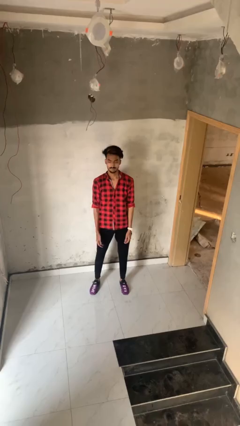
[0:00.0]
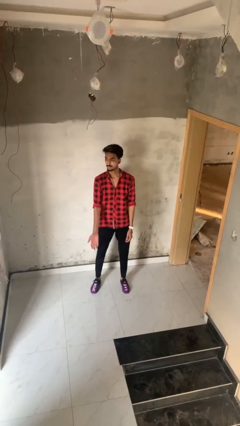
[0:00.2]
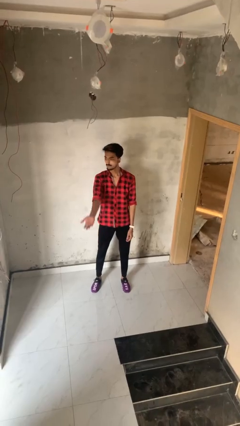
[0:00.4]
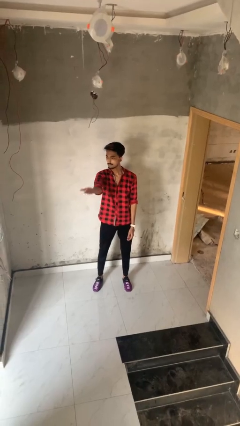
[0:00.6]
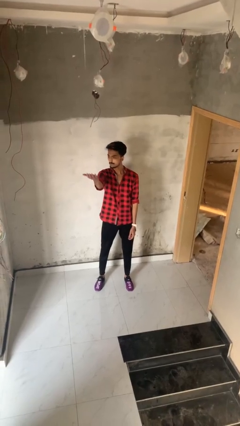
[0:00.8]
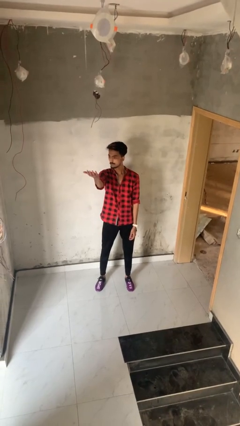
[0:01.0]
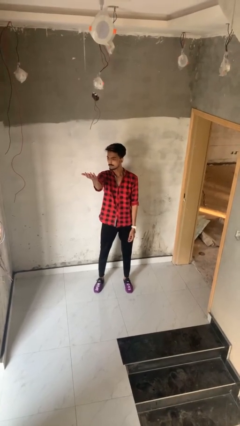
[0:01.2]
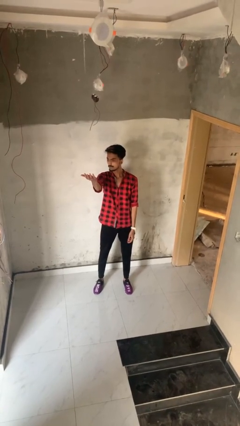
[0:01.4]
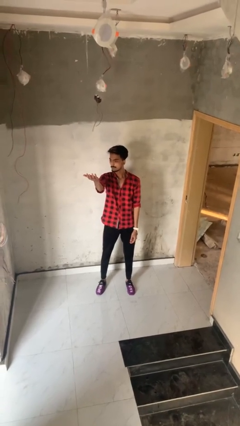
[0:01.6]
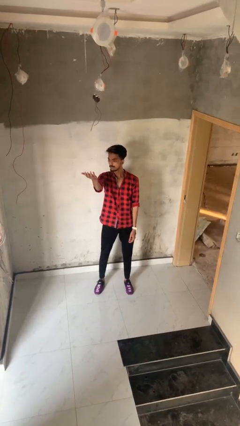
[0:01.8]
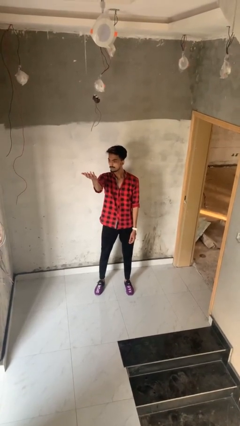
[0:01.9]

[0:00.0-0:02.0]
person gestures swipe up

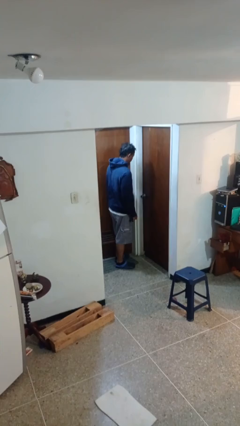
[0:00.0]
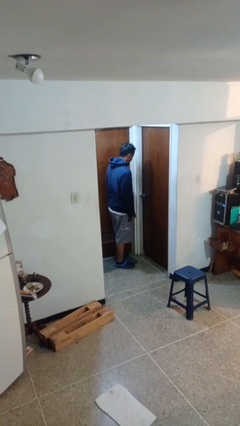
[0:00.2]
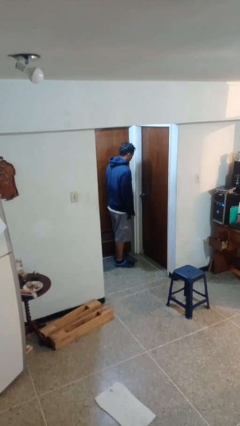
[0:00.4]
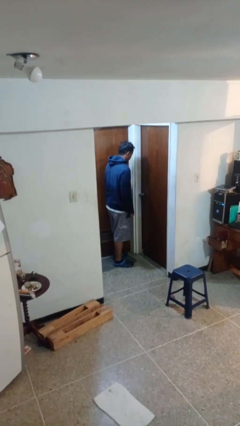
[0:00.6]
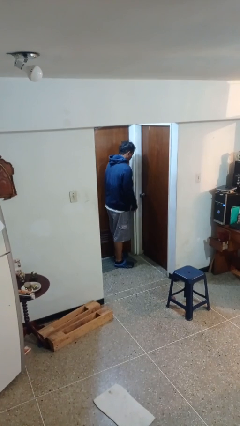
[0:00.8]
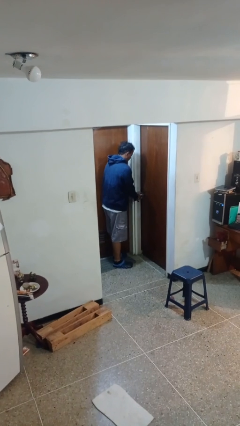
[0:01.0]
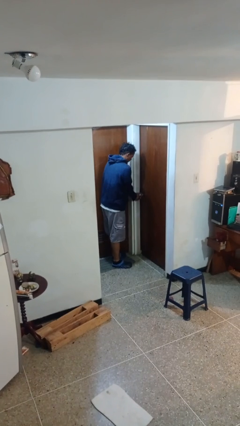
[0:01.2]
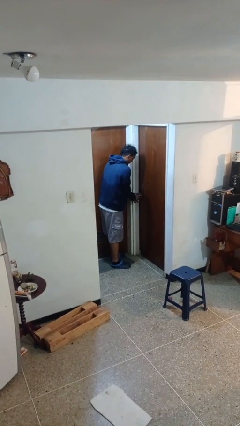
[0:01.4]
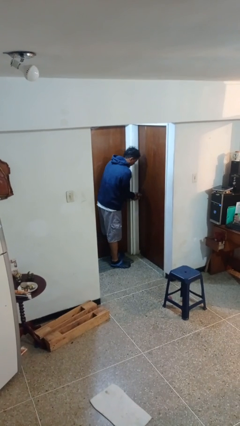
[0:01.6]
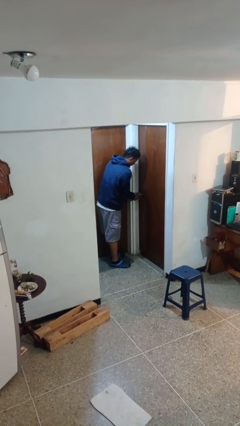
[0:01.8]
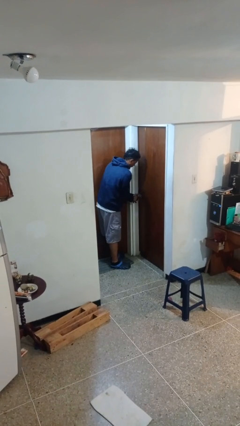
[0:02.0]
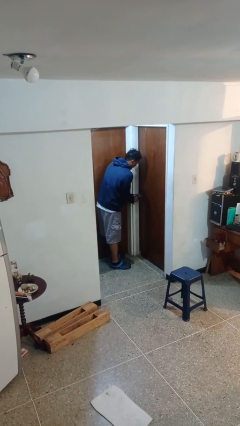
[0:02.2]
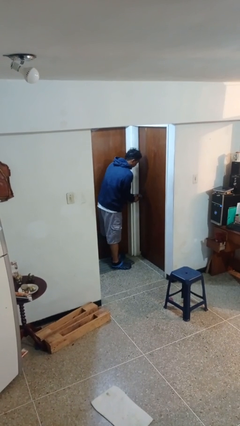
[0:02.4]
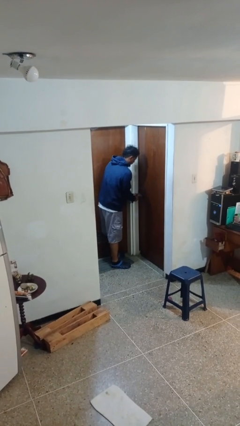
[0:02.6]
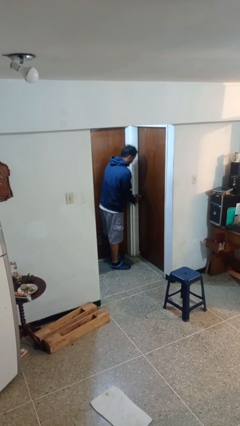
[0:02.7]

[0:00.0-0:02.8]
person unlocks door with keys

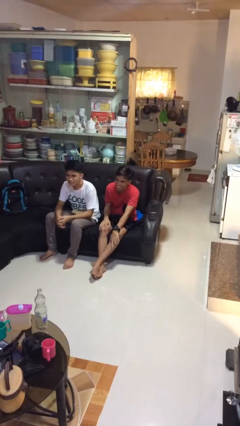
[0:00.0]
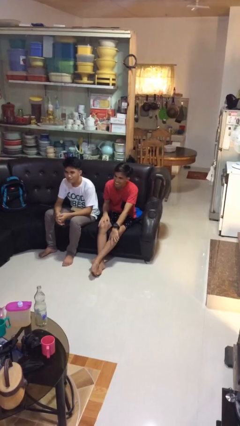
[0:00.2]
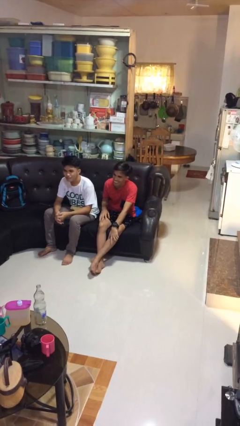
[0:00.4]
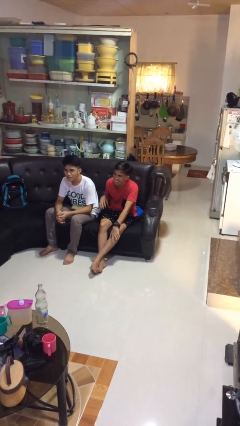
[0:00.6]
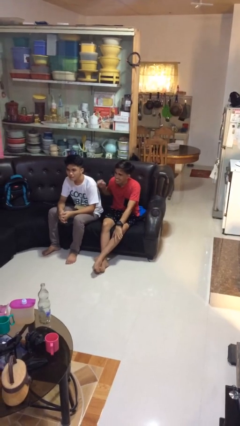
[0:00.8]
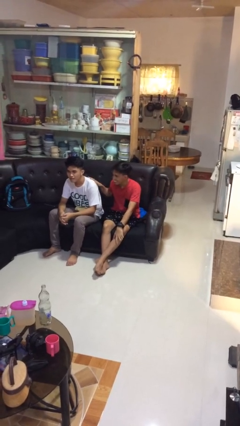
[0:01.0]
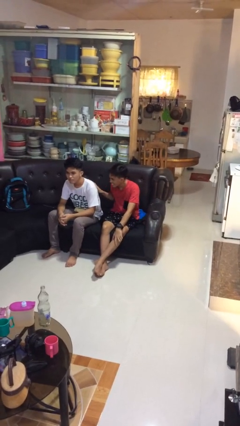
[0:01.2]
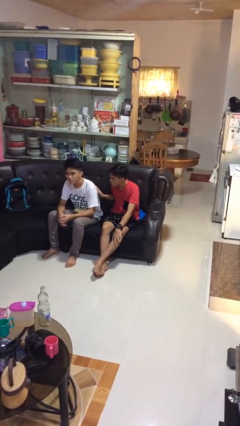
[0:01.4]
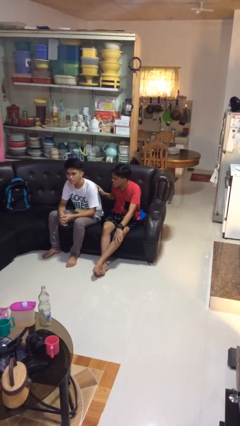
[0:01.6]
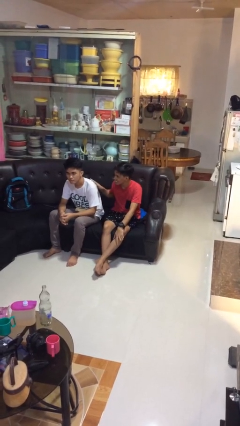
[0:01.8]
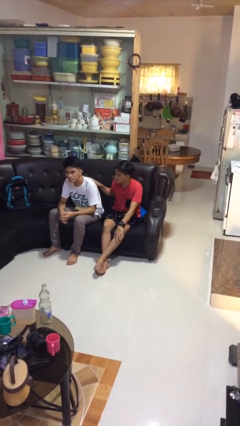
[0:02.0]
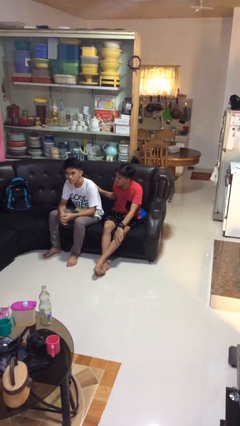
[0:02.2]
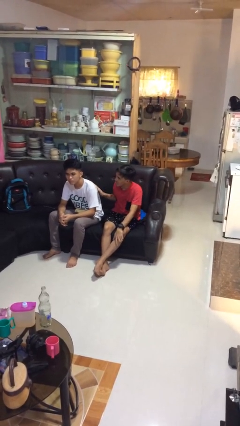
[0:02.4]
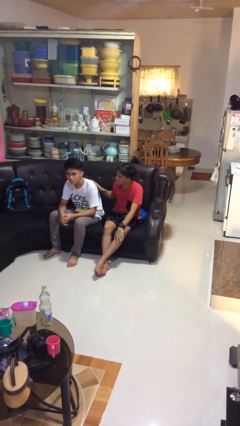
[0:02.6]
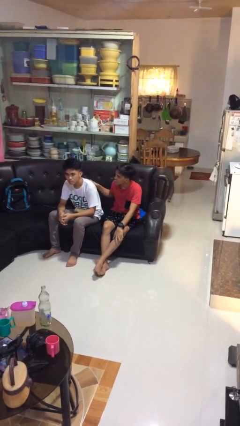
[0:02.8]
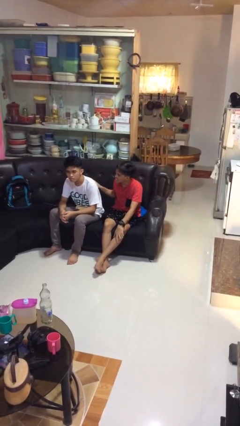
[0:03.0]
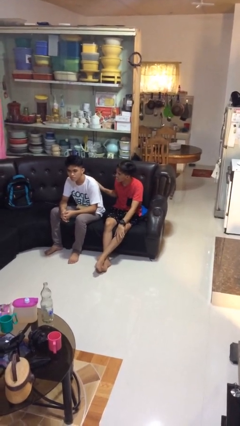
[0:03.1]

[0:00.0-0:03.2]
person touches back of person

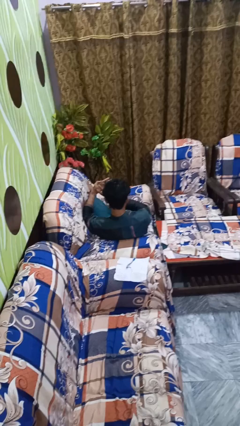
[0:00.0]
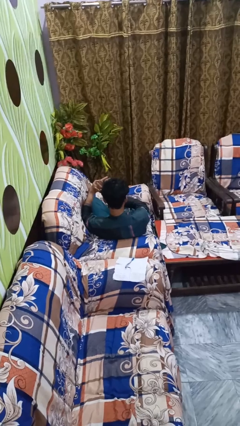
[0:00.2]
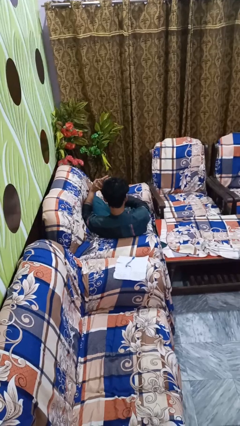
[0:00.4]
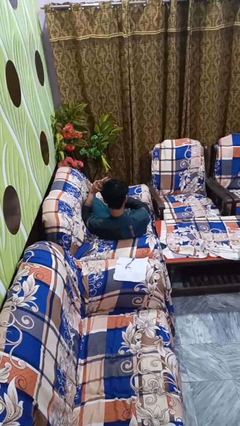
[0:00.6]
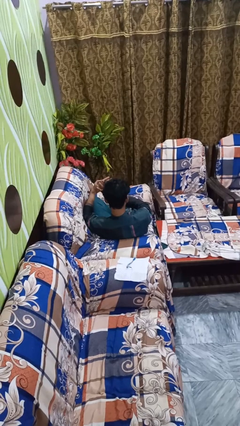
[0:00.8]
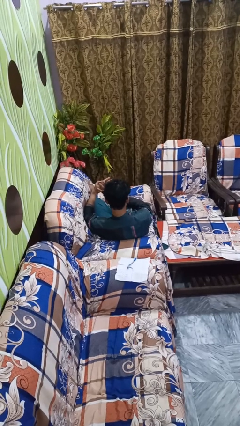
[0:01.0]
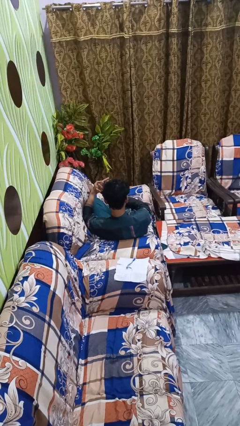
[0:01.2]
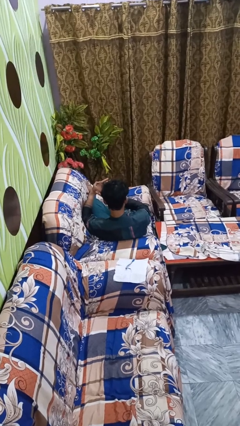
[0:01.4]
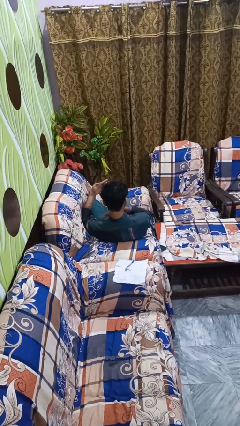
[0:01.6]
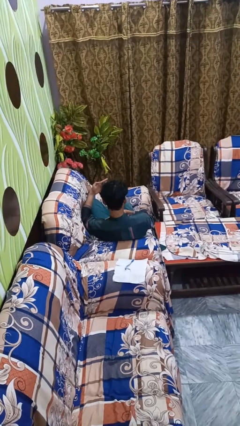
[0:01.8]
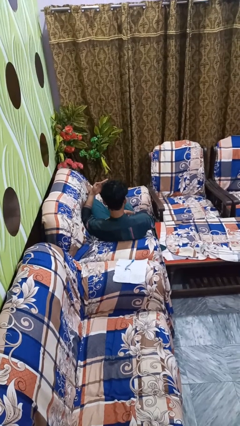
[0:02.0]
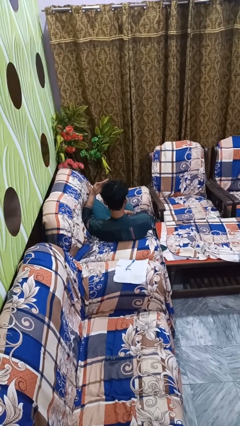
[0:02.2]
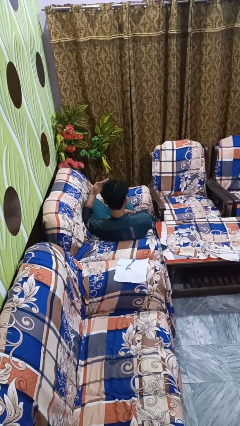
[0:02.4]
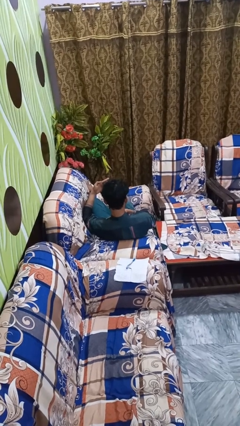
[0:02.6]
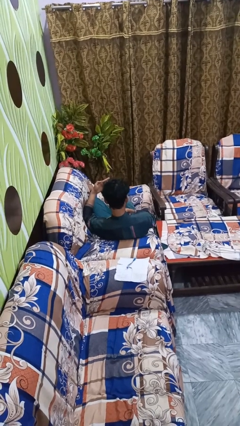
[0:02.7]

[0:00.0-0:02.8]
person gestures number four

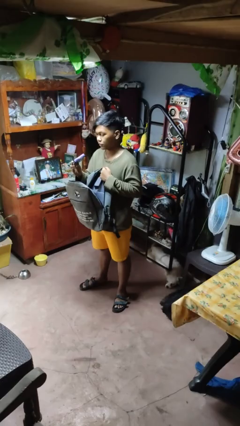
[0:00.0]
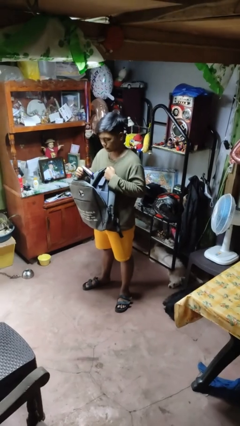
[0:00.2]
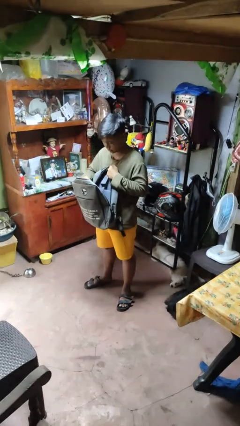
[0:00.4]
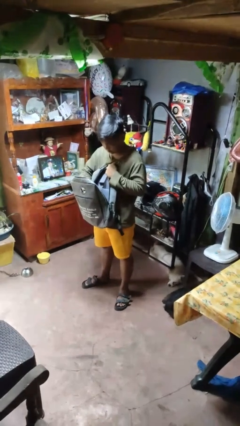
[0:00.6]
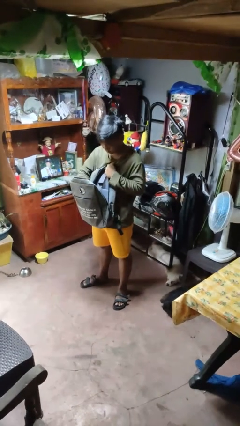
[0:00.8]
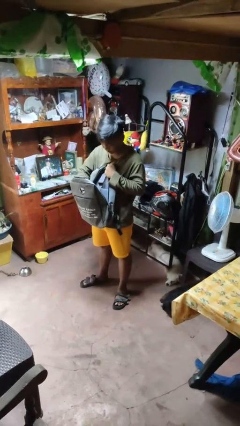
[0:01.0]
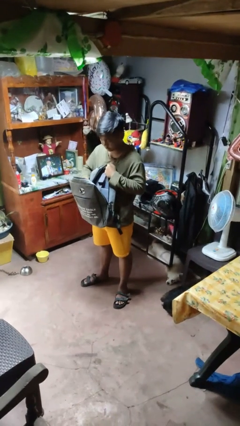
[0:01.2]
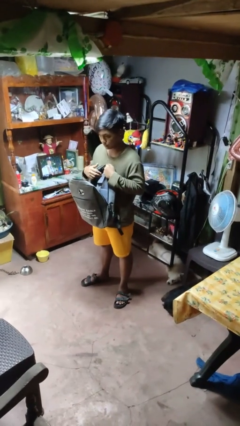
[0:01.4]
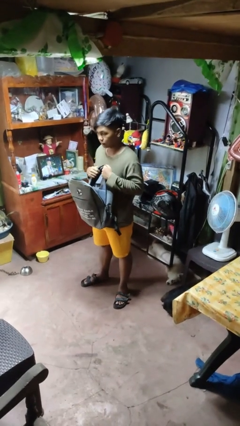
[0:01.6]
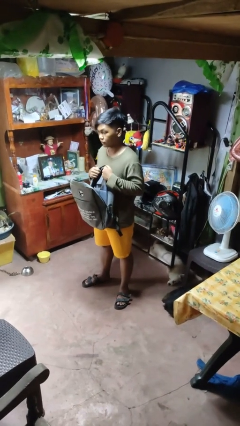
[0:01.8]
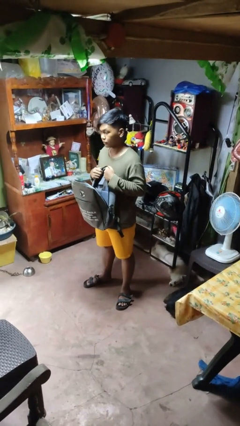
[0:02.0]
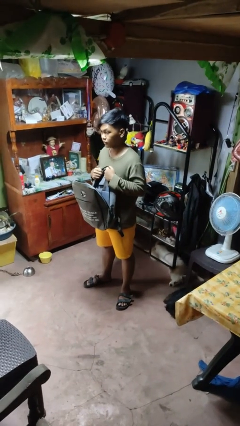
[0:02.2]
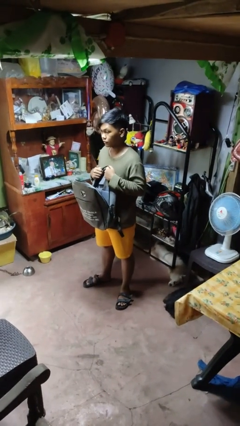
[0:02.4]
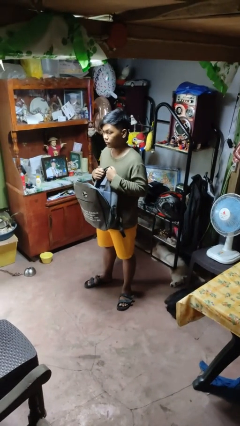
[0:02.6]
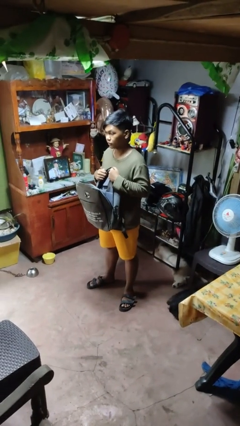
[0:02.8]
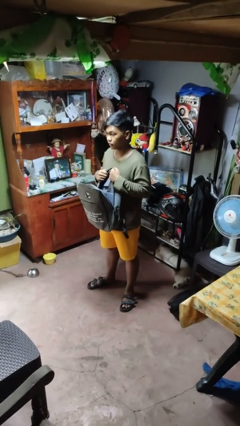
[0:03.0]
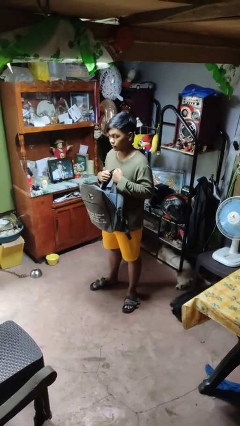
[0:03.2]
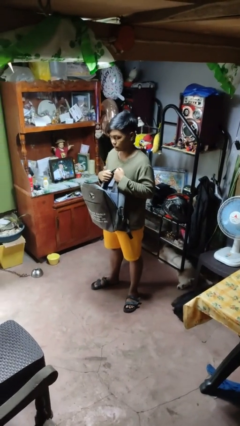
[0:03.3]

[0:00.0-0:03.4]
person puts object into backpack

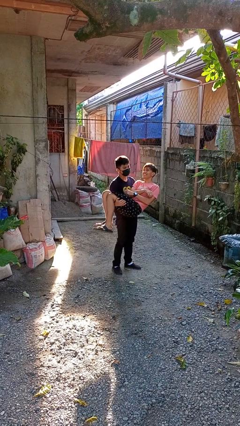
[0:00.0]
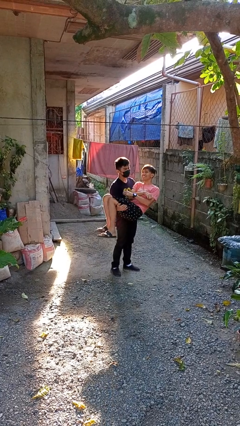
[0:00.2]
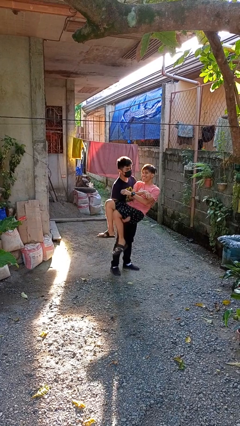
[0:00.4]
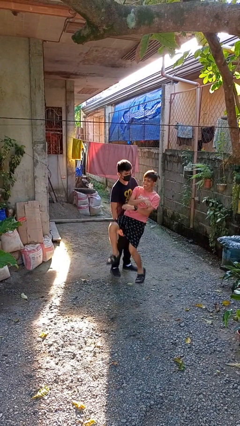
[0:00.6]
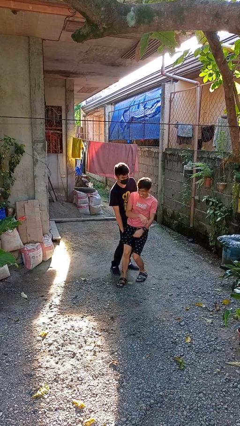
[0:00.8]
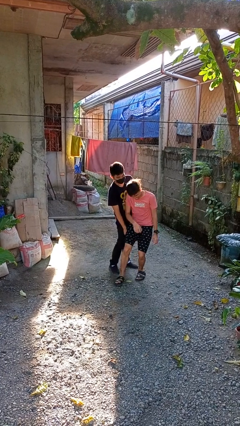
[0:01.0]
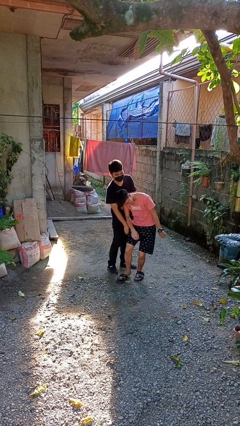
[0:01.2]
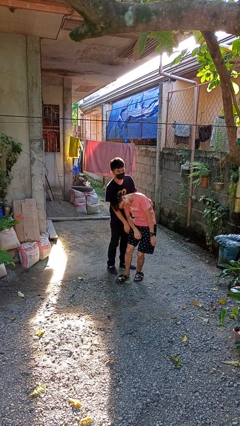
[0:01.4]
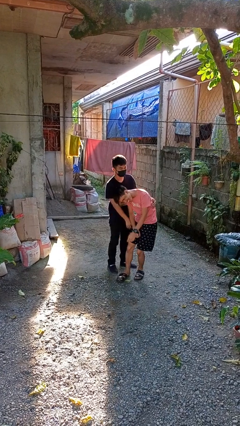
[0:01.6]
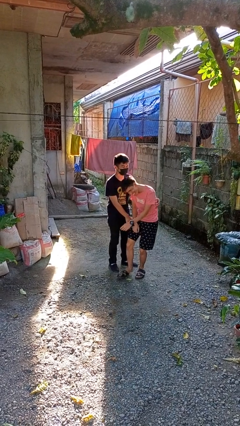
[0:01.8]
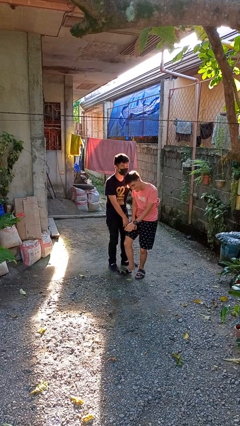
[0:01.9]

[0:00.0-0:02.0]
person puts down person

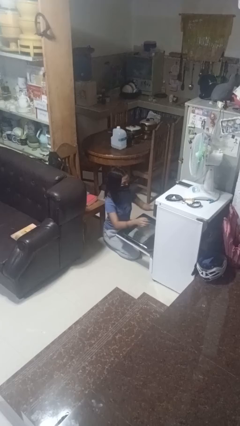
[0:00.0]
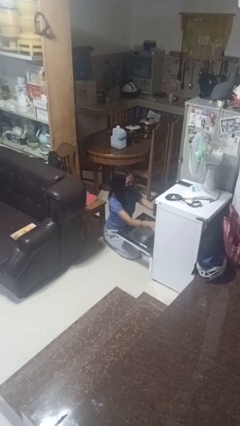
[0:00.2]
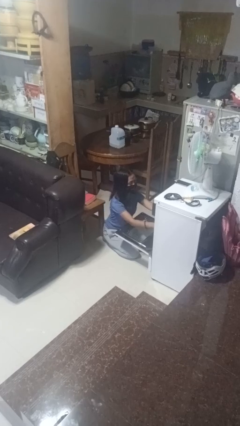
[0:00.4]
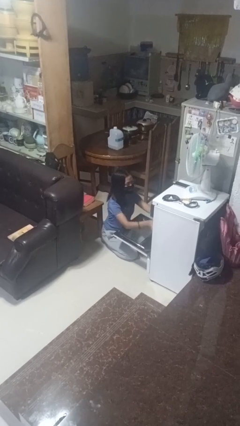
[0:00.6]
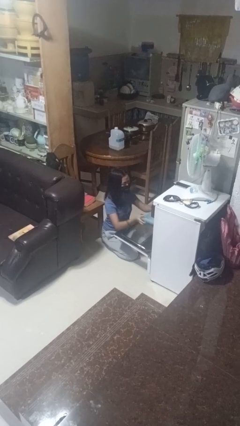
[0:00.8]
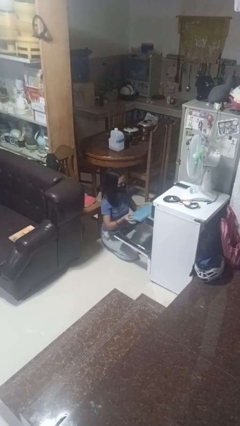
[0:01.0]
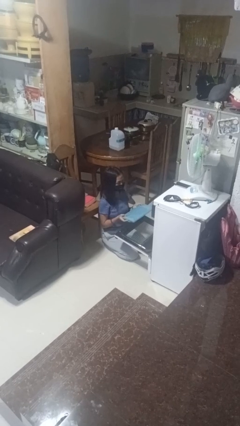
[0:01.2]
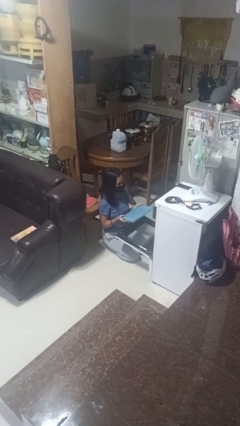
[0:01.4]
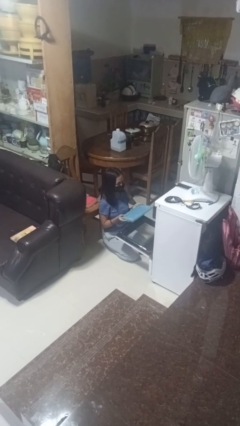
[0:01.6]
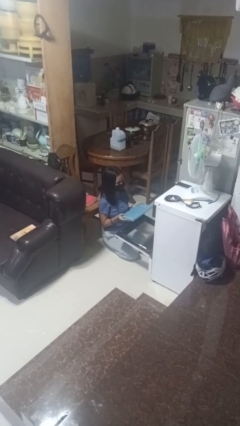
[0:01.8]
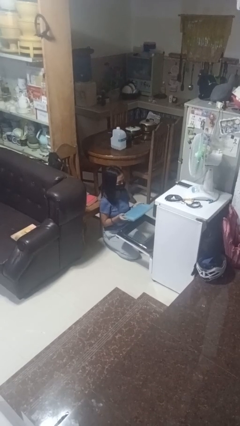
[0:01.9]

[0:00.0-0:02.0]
person takes object from oven
